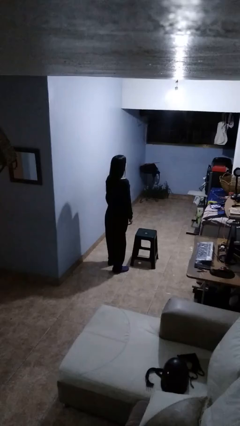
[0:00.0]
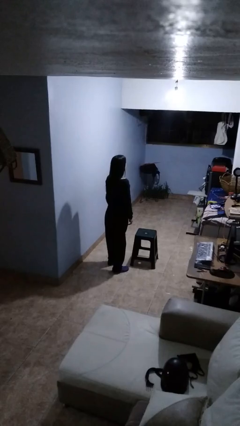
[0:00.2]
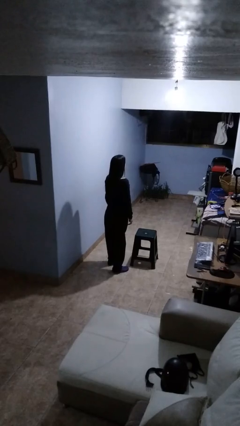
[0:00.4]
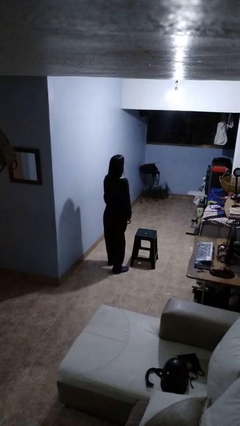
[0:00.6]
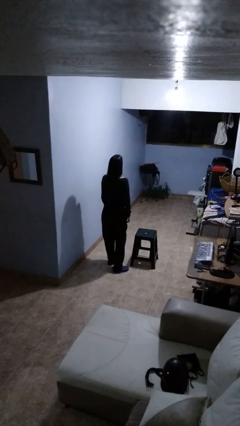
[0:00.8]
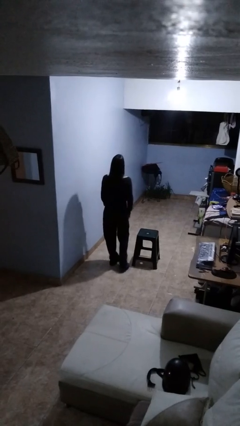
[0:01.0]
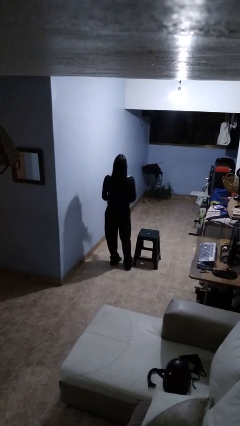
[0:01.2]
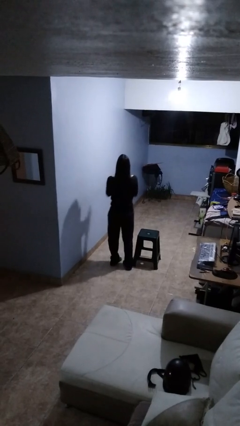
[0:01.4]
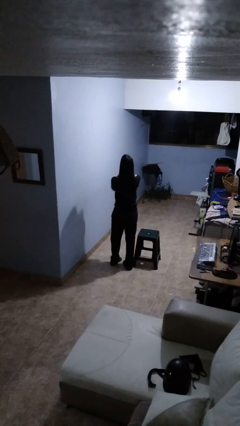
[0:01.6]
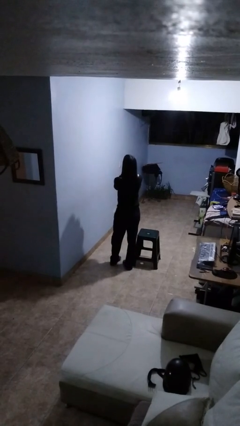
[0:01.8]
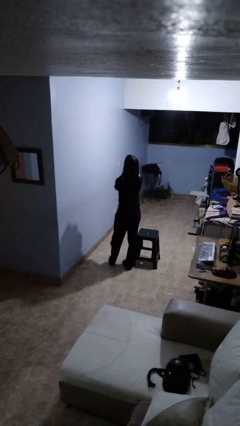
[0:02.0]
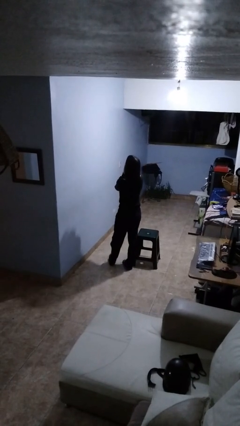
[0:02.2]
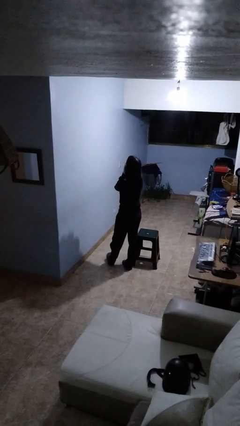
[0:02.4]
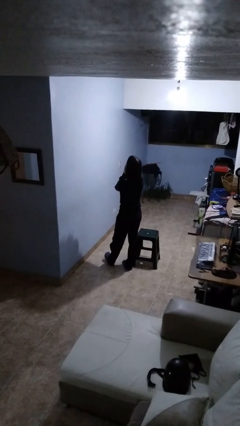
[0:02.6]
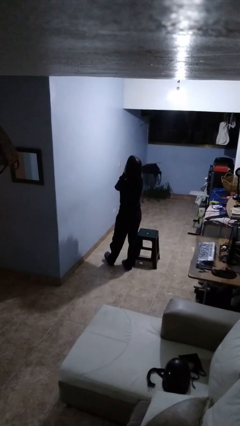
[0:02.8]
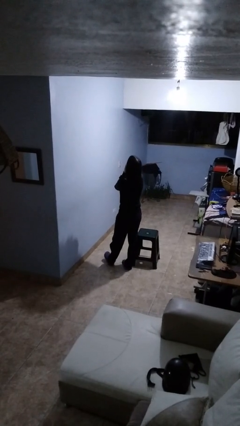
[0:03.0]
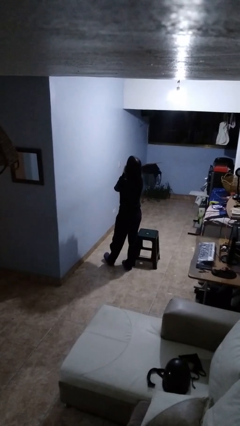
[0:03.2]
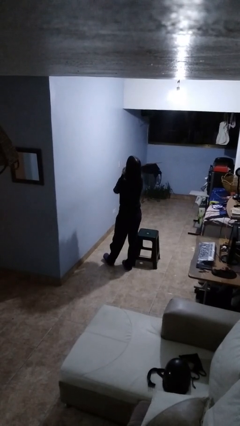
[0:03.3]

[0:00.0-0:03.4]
person yawns

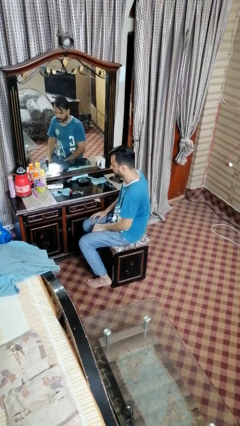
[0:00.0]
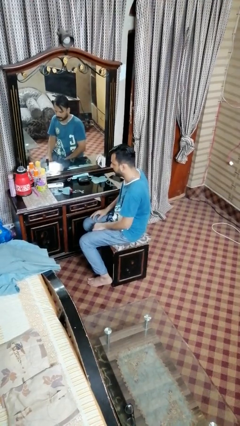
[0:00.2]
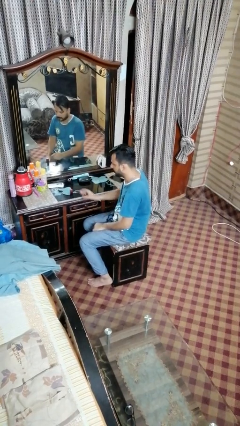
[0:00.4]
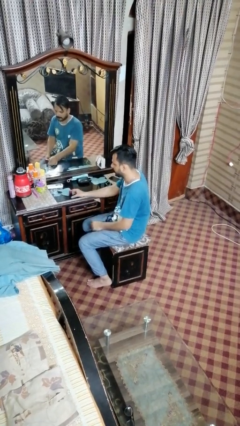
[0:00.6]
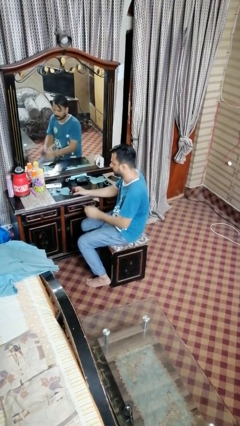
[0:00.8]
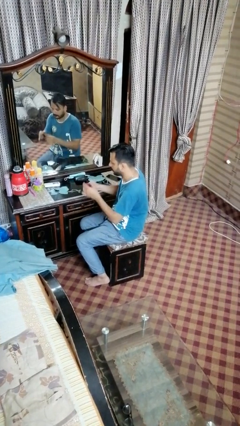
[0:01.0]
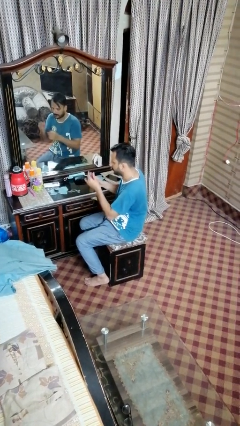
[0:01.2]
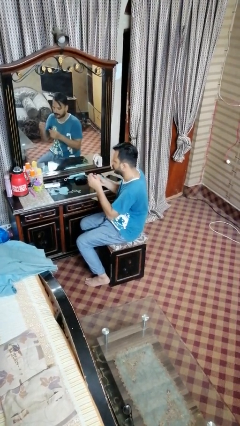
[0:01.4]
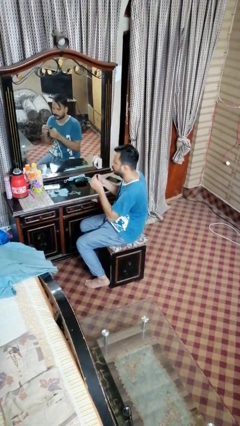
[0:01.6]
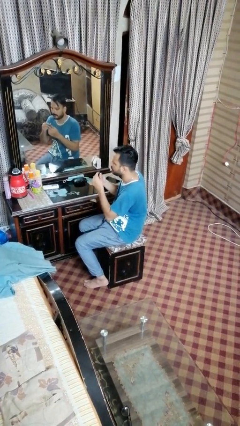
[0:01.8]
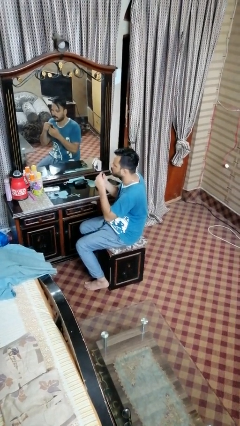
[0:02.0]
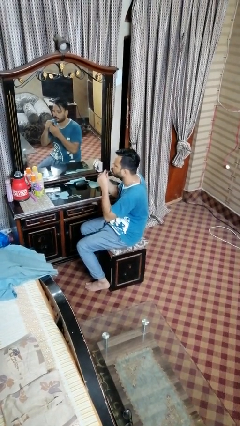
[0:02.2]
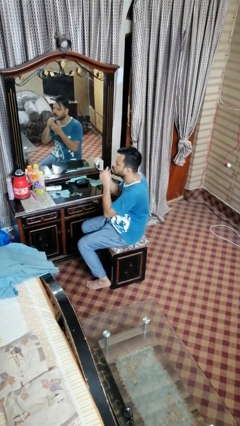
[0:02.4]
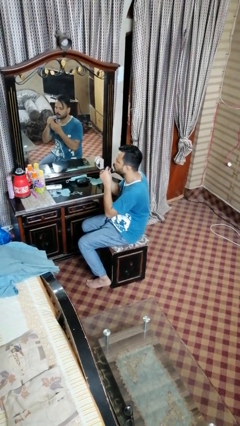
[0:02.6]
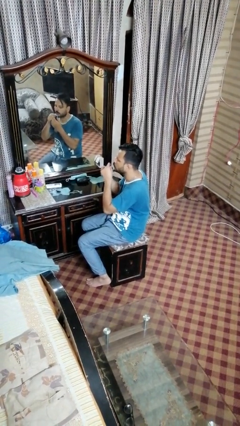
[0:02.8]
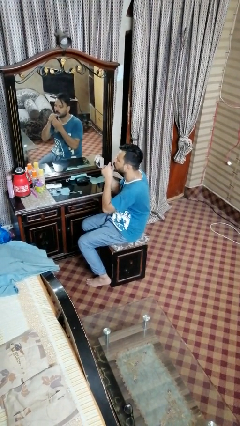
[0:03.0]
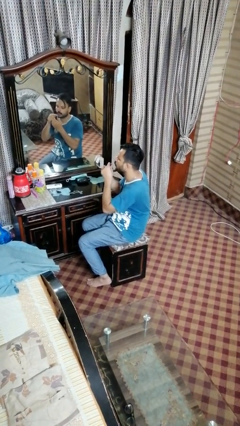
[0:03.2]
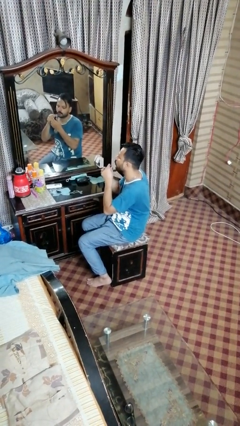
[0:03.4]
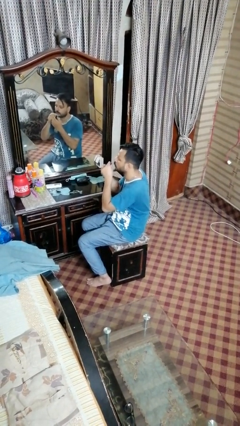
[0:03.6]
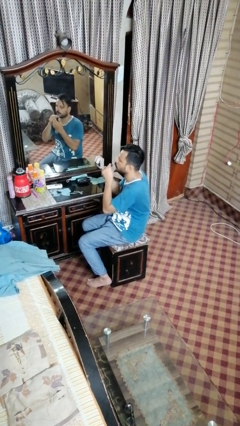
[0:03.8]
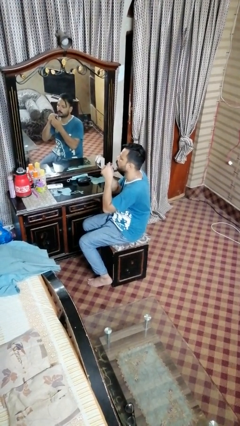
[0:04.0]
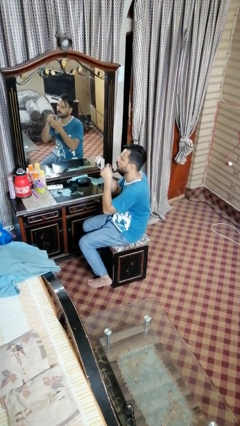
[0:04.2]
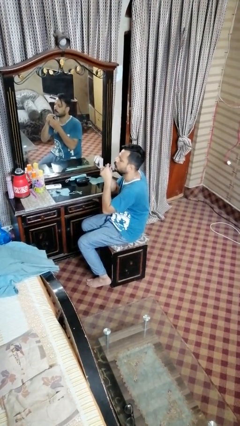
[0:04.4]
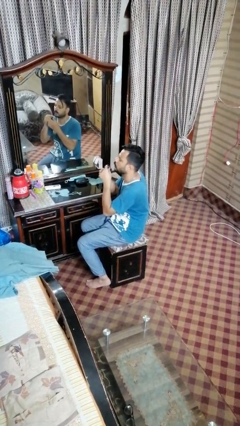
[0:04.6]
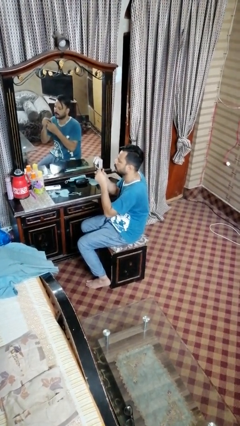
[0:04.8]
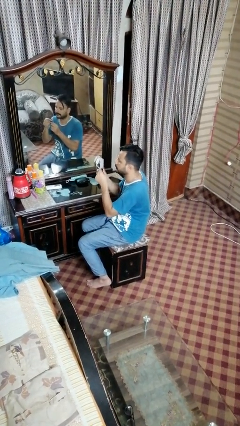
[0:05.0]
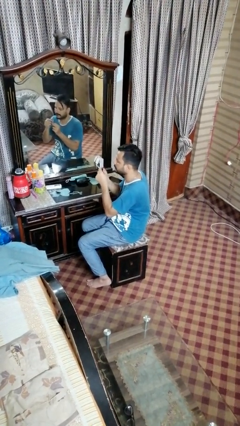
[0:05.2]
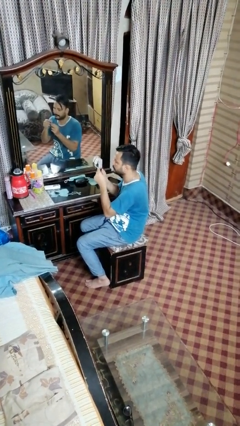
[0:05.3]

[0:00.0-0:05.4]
person applies lip makeup

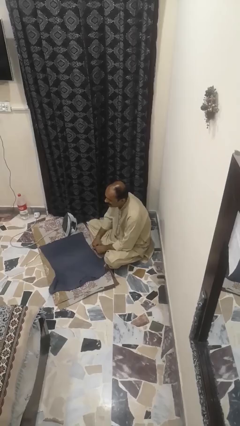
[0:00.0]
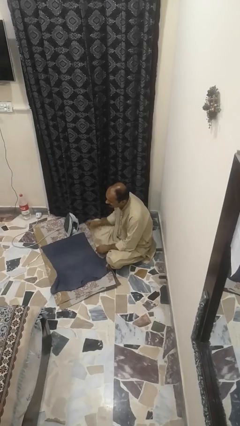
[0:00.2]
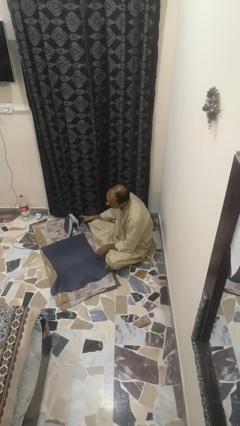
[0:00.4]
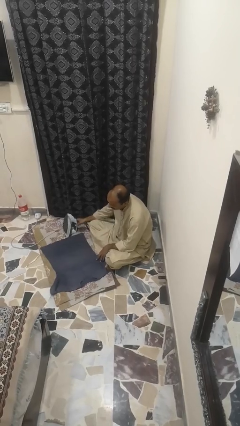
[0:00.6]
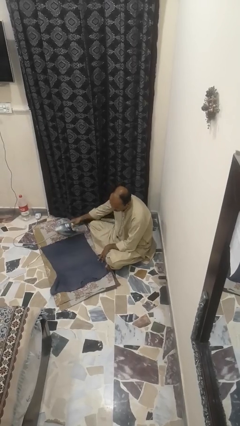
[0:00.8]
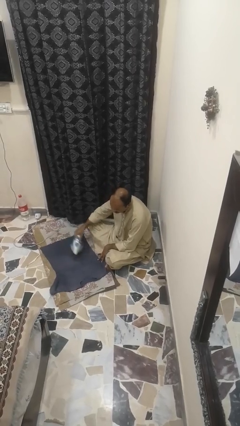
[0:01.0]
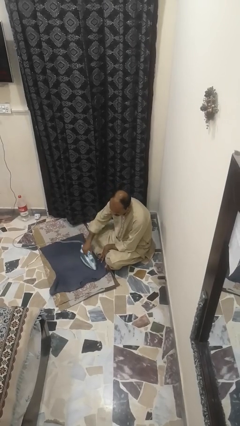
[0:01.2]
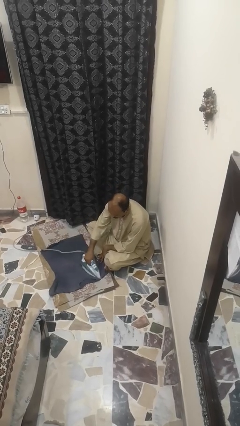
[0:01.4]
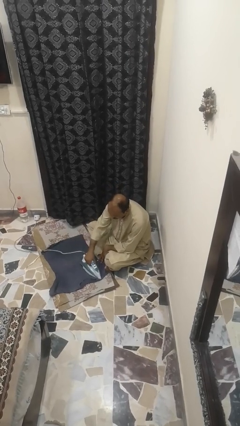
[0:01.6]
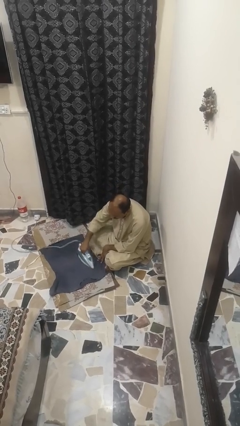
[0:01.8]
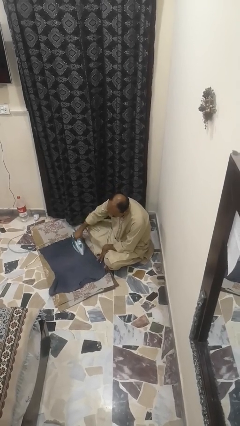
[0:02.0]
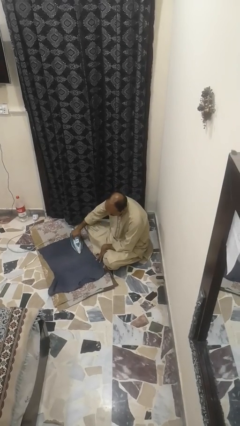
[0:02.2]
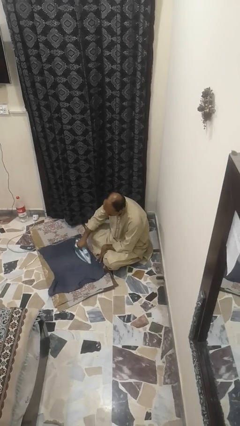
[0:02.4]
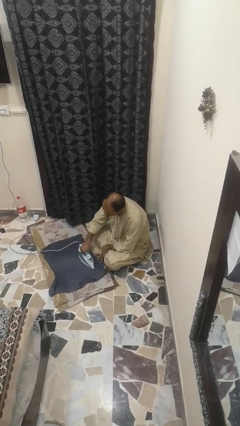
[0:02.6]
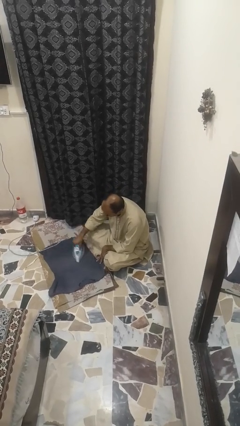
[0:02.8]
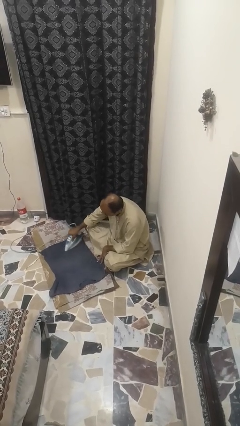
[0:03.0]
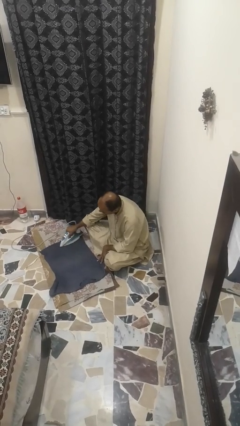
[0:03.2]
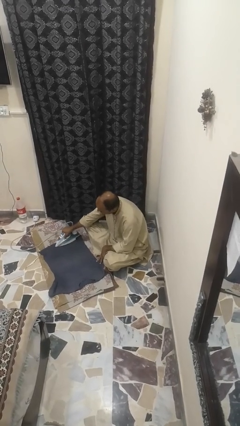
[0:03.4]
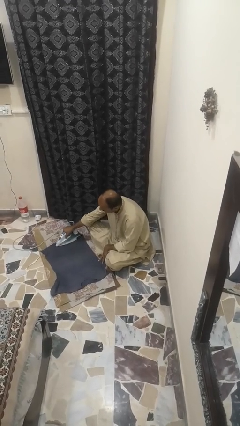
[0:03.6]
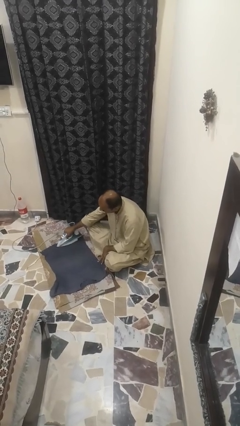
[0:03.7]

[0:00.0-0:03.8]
person irons clothes

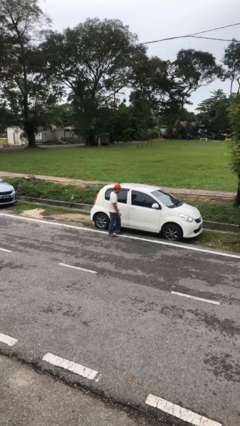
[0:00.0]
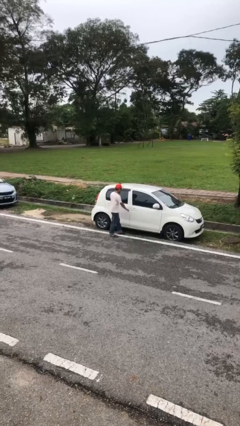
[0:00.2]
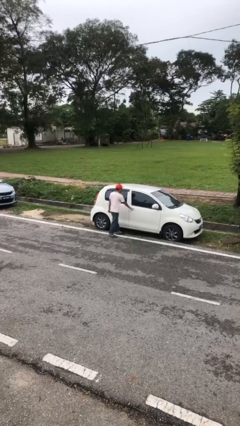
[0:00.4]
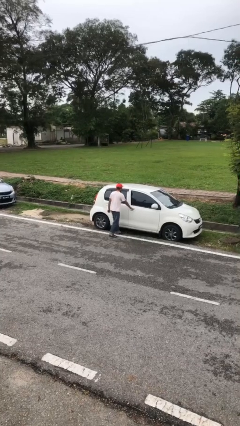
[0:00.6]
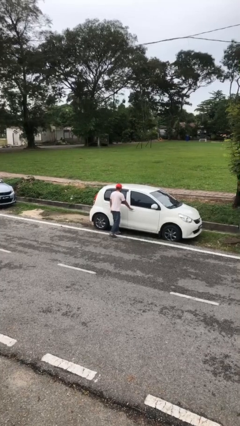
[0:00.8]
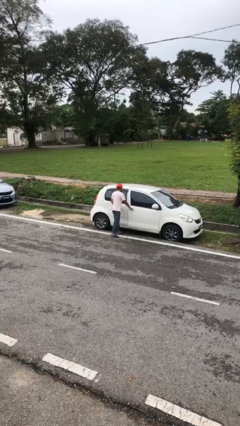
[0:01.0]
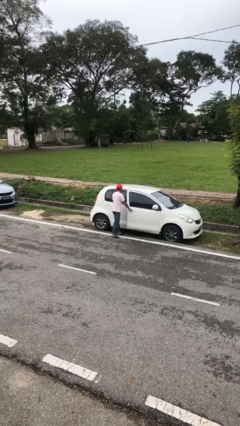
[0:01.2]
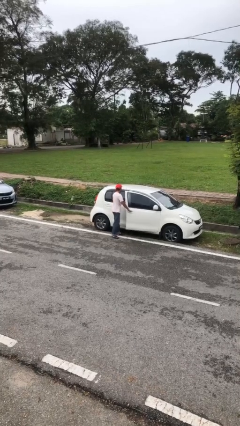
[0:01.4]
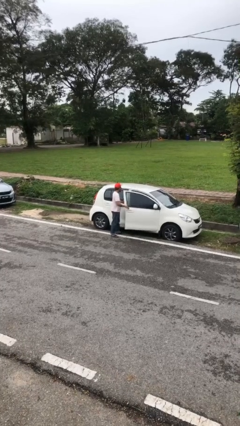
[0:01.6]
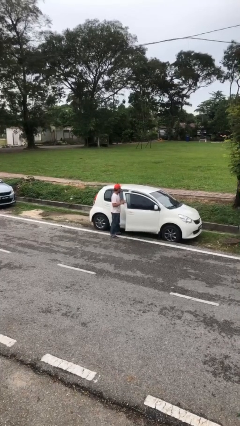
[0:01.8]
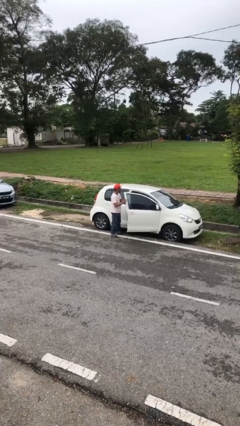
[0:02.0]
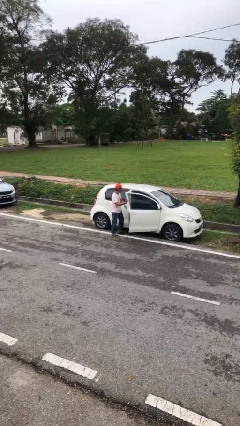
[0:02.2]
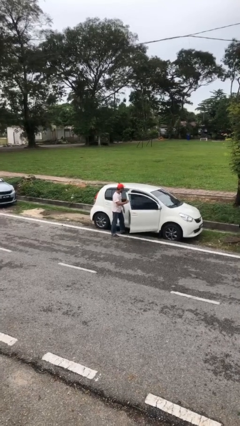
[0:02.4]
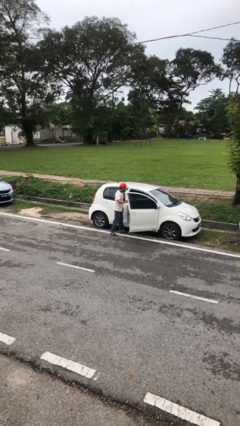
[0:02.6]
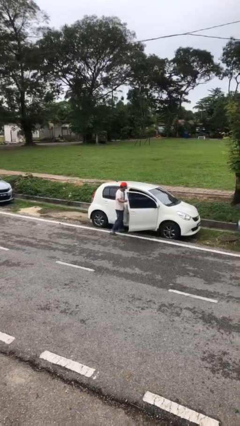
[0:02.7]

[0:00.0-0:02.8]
person opens car door

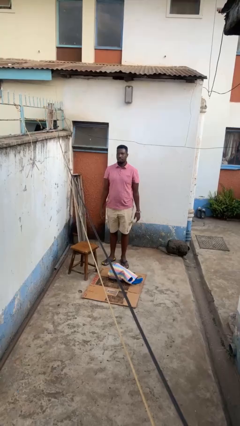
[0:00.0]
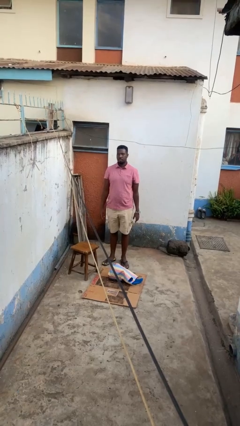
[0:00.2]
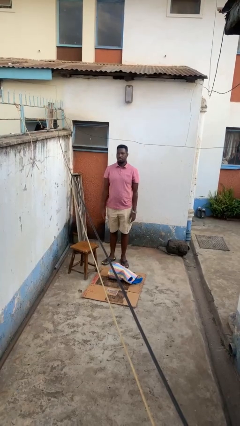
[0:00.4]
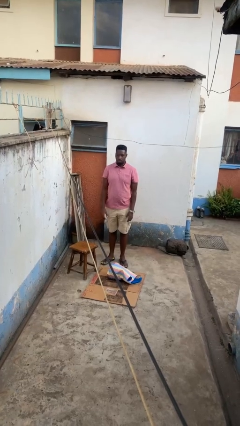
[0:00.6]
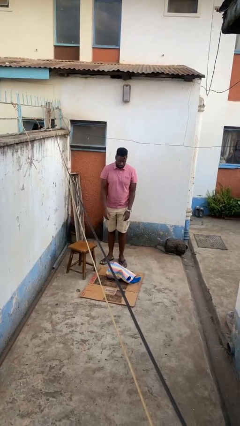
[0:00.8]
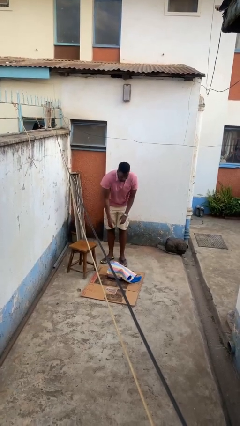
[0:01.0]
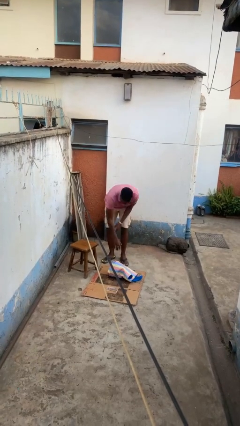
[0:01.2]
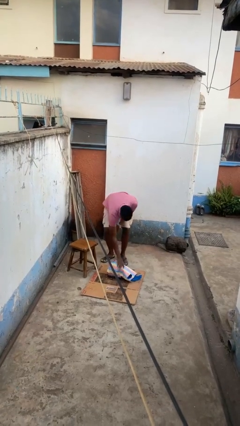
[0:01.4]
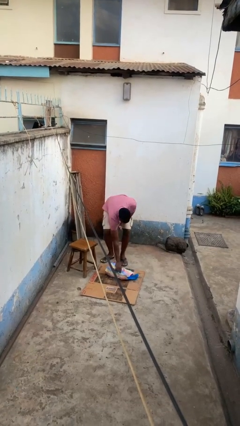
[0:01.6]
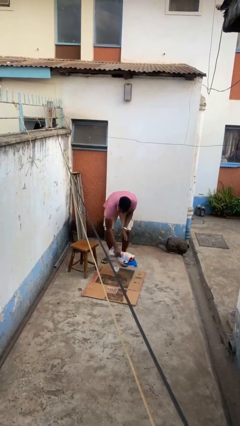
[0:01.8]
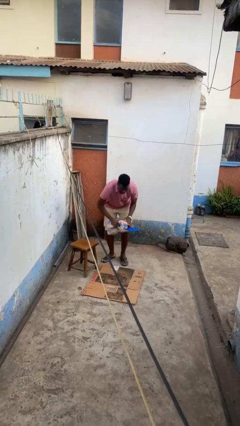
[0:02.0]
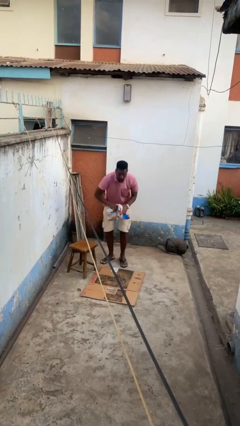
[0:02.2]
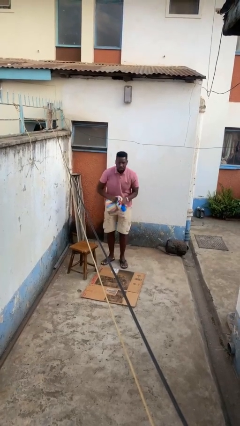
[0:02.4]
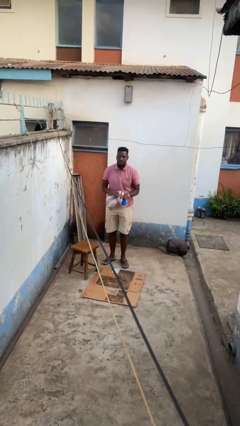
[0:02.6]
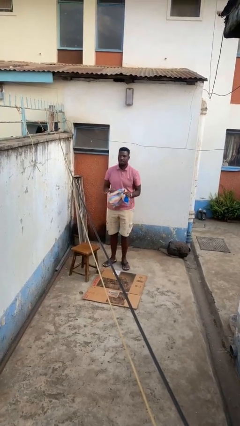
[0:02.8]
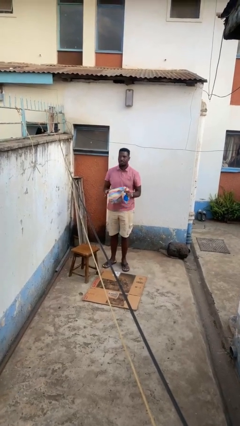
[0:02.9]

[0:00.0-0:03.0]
person picks up object from floor
